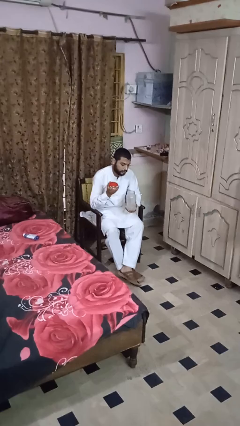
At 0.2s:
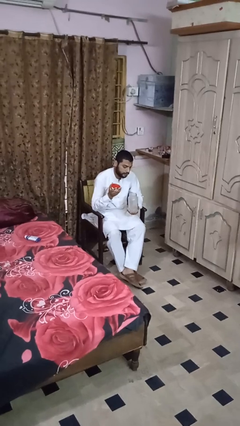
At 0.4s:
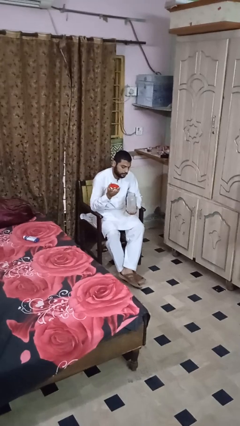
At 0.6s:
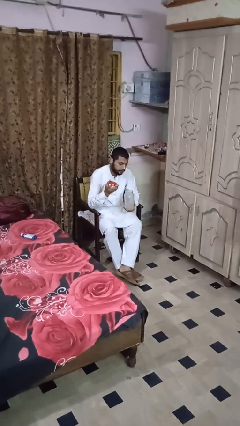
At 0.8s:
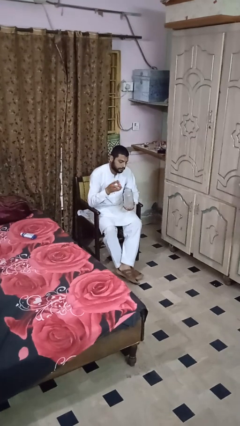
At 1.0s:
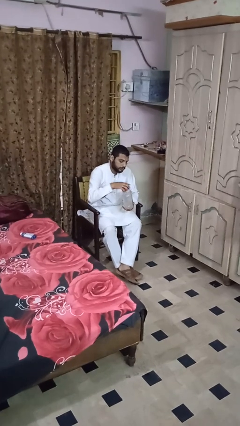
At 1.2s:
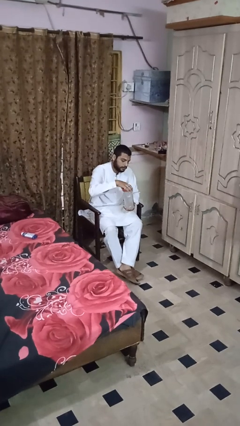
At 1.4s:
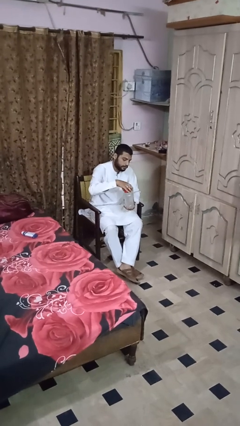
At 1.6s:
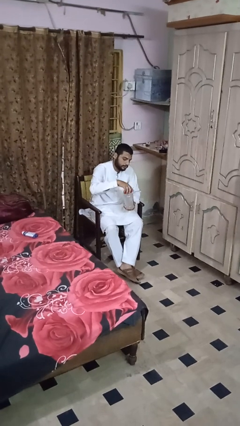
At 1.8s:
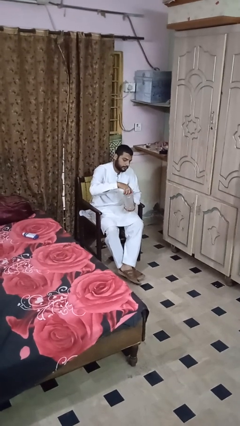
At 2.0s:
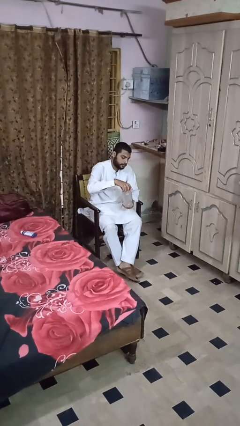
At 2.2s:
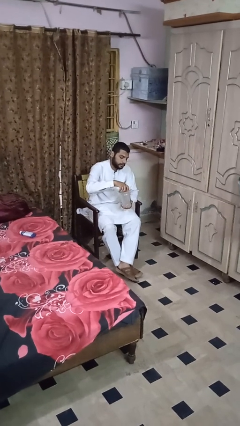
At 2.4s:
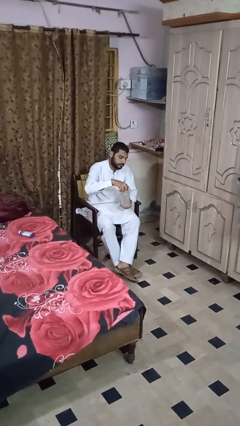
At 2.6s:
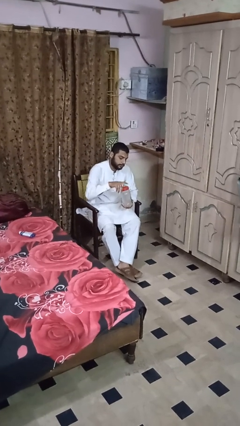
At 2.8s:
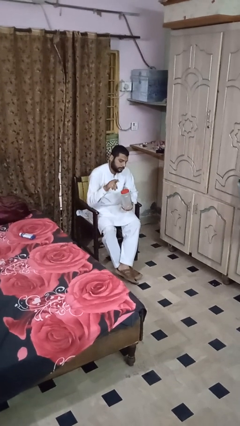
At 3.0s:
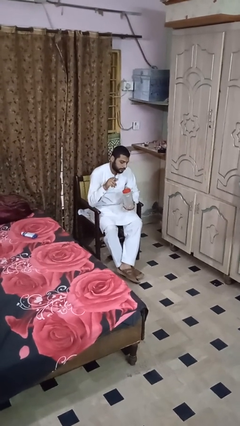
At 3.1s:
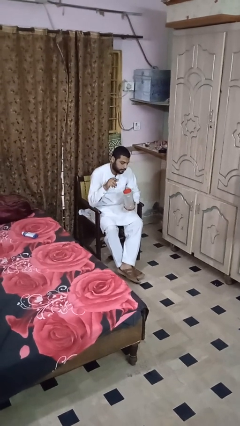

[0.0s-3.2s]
person closes jar

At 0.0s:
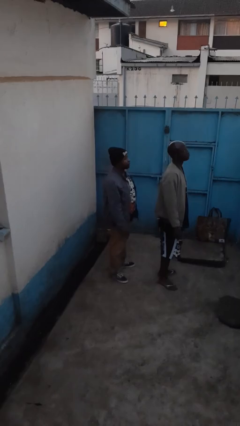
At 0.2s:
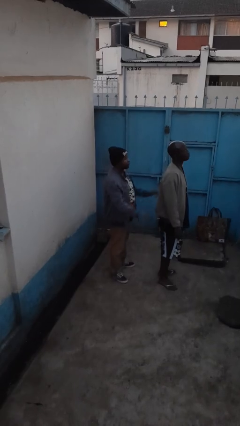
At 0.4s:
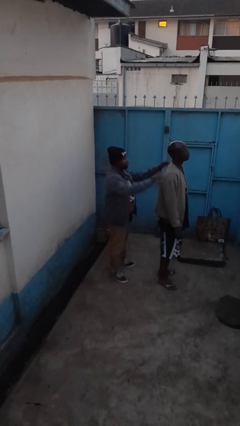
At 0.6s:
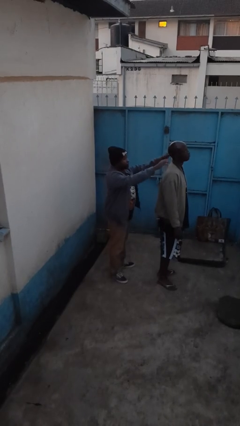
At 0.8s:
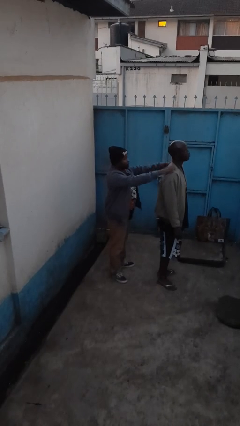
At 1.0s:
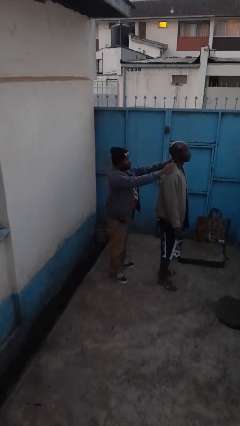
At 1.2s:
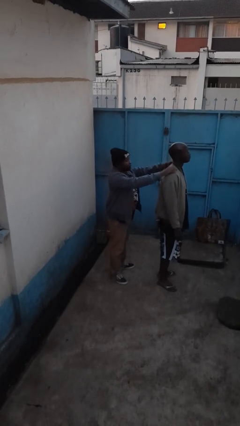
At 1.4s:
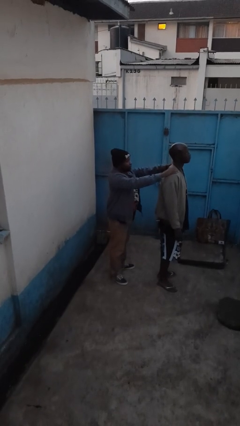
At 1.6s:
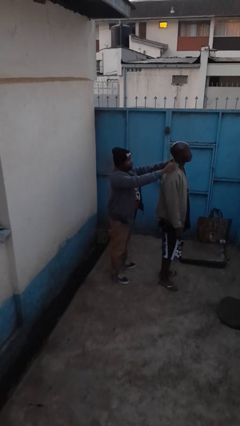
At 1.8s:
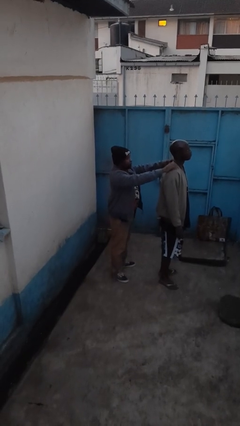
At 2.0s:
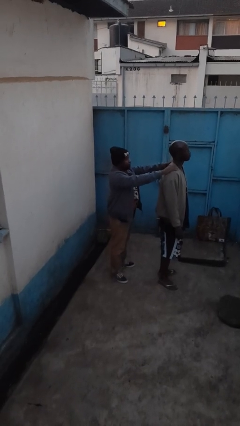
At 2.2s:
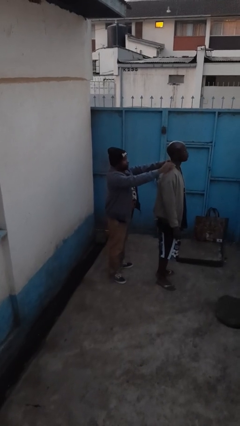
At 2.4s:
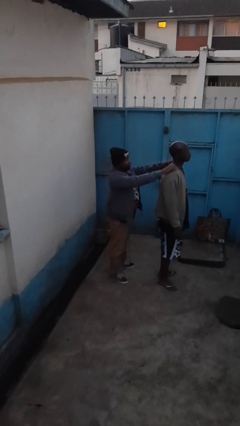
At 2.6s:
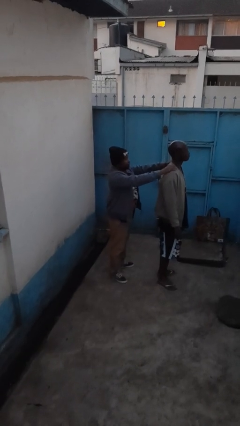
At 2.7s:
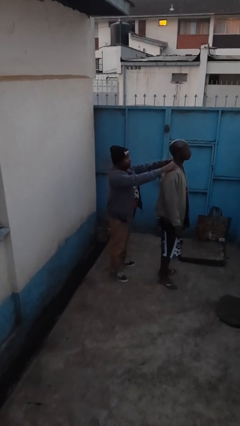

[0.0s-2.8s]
person pounds shoulders of person

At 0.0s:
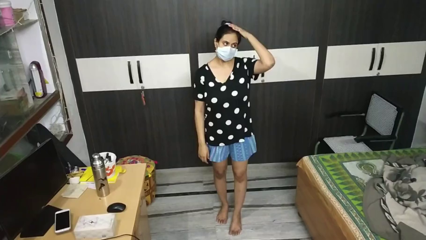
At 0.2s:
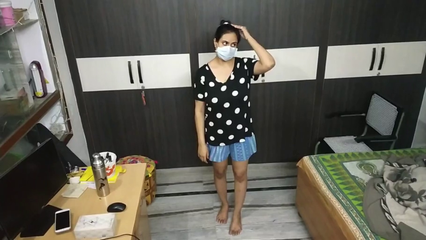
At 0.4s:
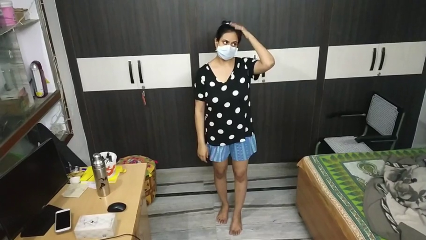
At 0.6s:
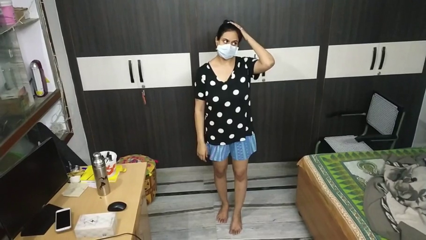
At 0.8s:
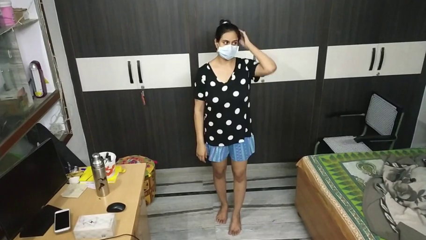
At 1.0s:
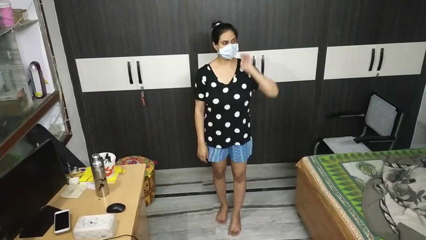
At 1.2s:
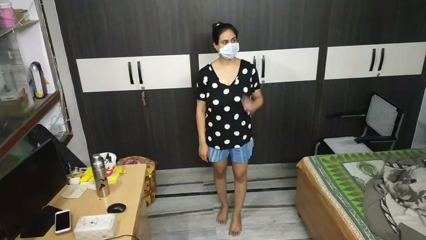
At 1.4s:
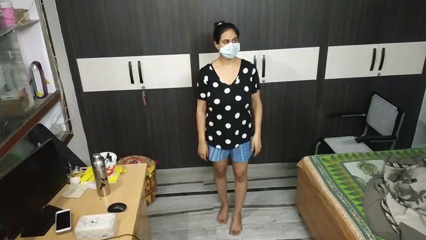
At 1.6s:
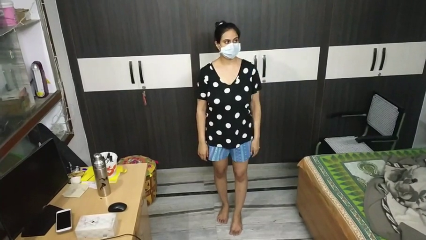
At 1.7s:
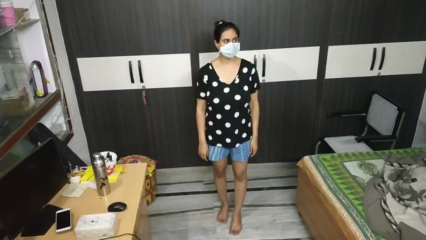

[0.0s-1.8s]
person pats head

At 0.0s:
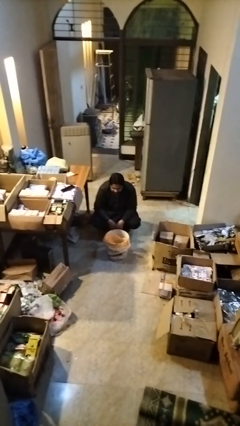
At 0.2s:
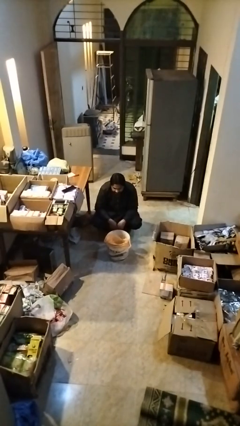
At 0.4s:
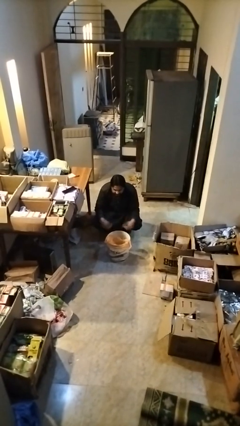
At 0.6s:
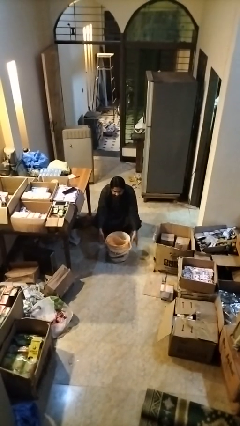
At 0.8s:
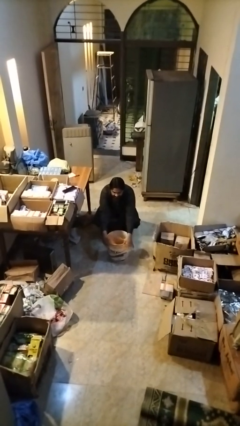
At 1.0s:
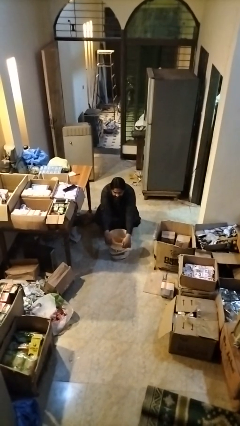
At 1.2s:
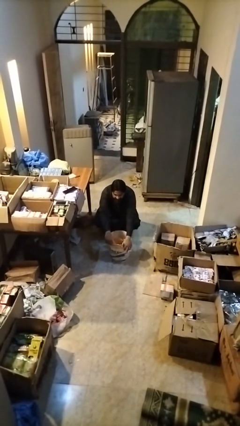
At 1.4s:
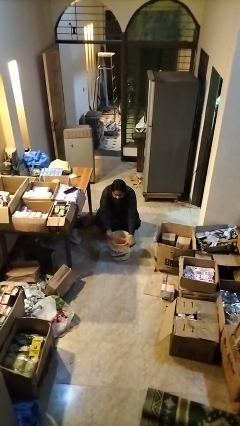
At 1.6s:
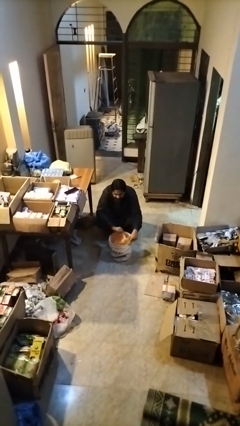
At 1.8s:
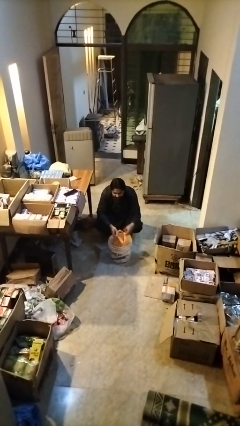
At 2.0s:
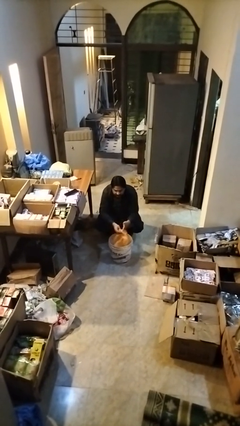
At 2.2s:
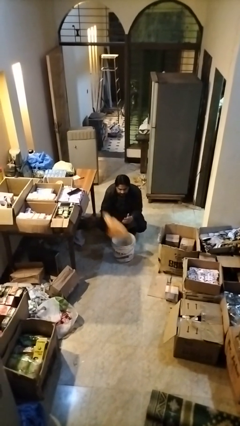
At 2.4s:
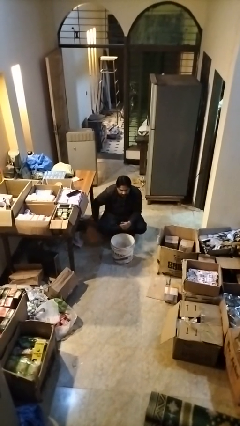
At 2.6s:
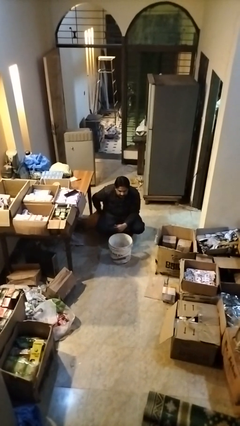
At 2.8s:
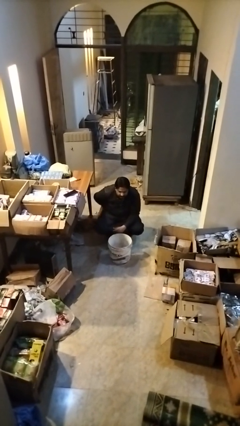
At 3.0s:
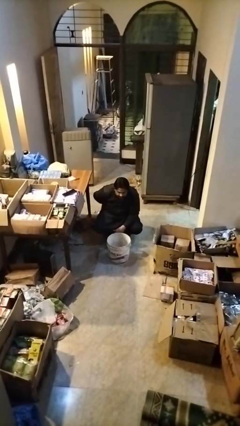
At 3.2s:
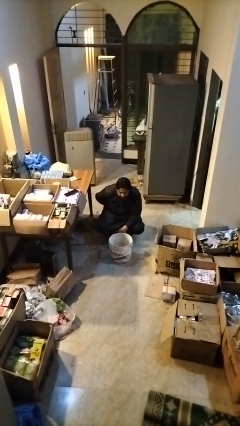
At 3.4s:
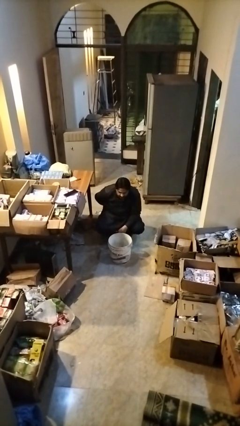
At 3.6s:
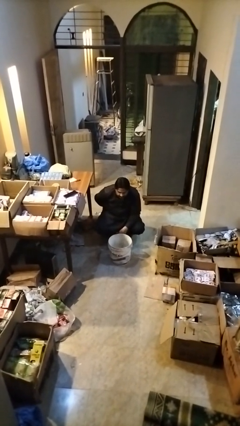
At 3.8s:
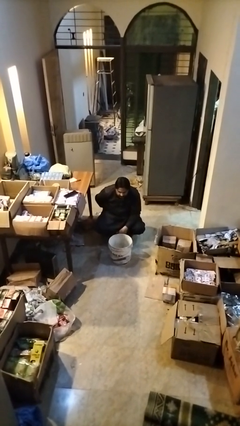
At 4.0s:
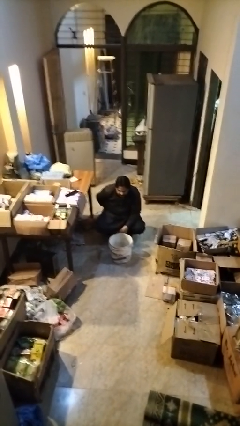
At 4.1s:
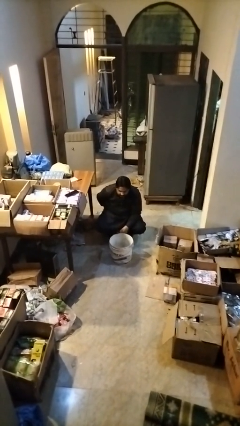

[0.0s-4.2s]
person removes trashbag from trashcan

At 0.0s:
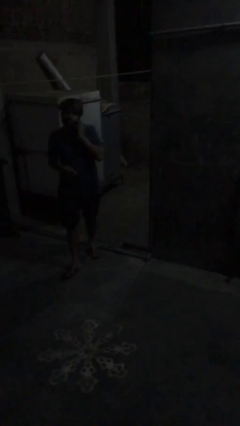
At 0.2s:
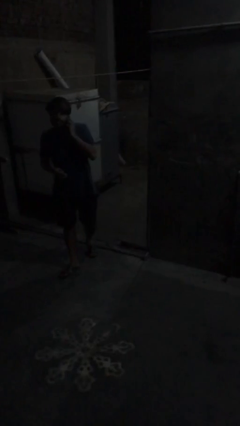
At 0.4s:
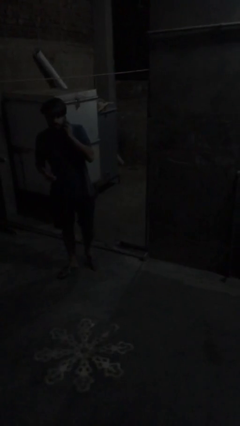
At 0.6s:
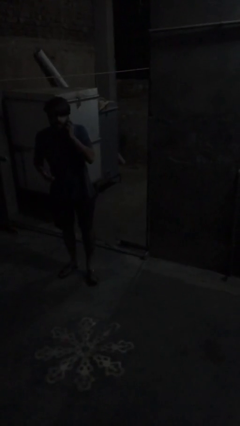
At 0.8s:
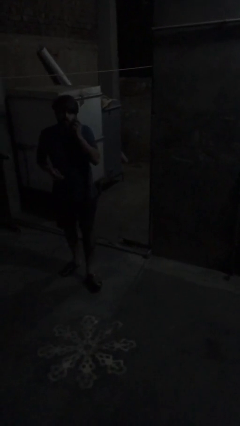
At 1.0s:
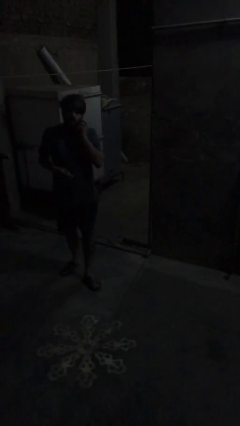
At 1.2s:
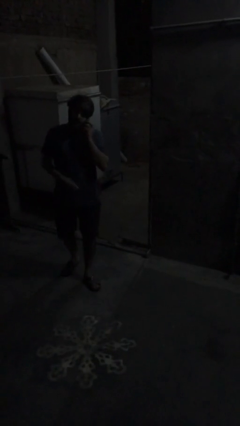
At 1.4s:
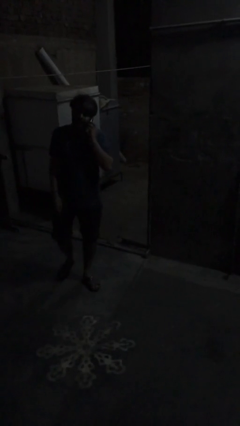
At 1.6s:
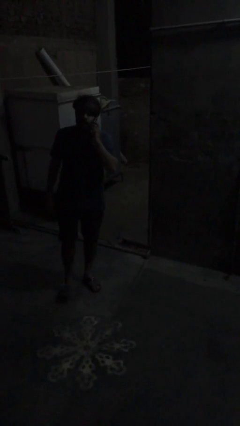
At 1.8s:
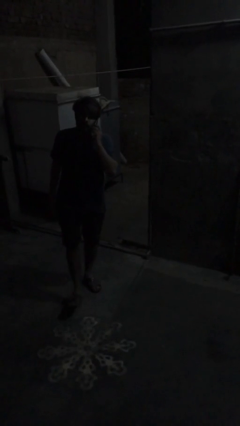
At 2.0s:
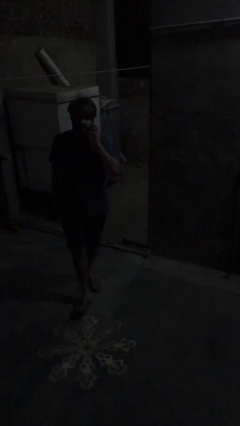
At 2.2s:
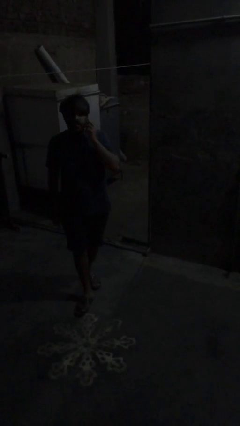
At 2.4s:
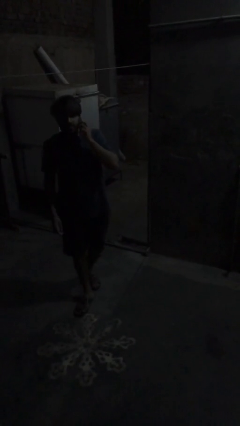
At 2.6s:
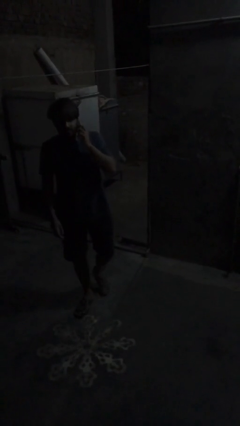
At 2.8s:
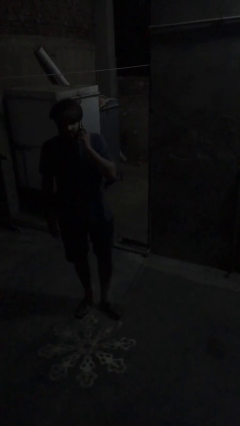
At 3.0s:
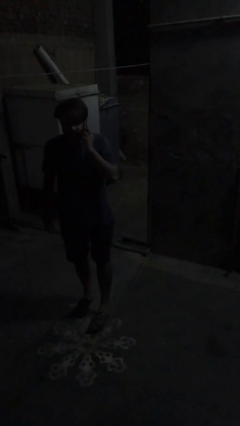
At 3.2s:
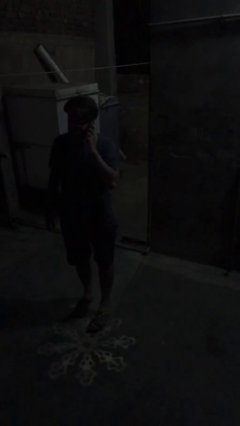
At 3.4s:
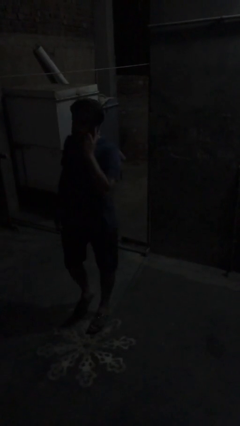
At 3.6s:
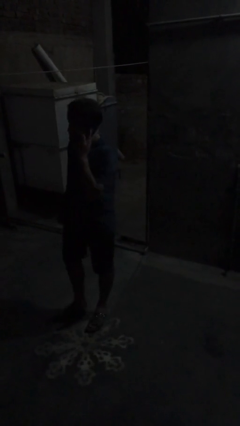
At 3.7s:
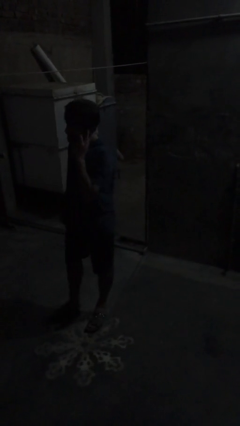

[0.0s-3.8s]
person talks on phone

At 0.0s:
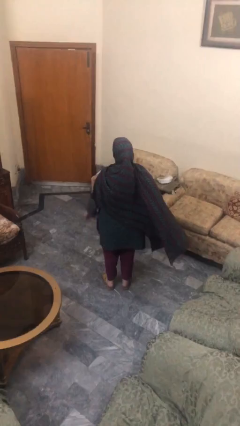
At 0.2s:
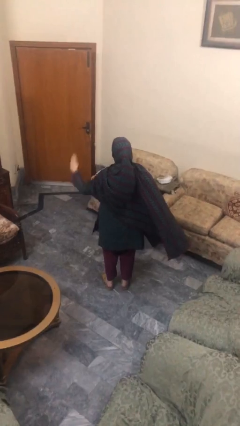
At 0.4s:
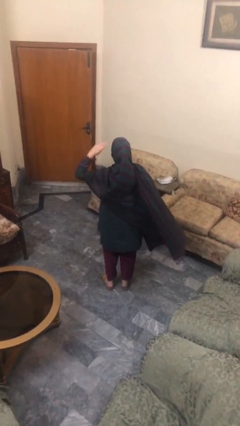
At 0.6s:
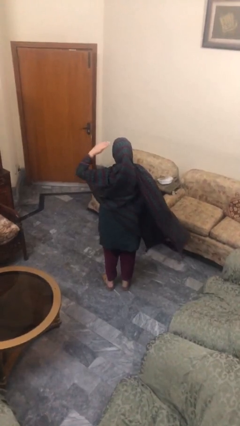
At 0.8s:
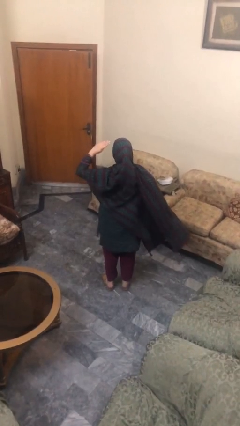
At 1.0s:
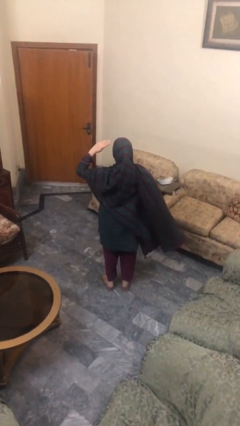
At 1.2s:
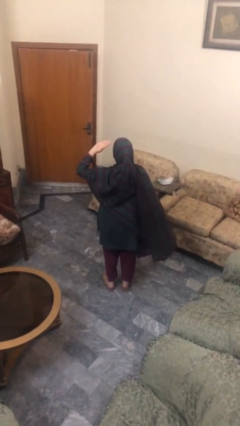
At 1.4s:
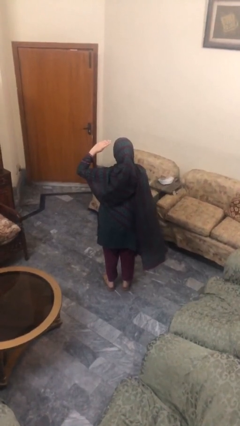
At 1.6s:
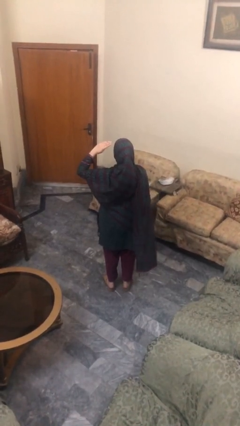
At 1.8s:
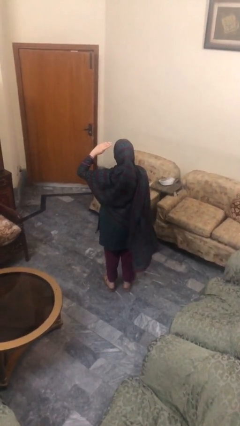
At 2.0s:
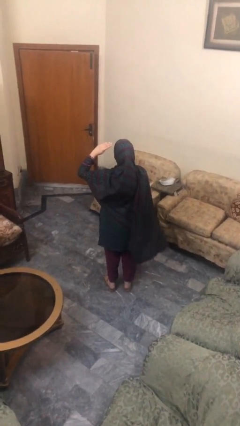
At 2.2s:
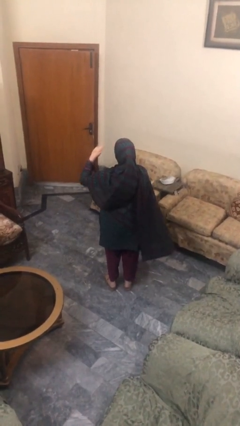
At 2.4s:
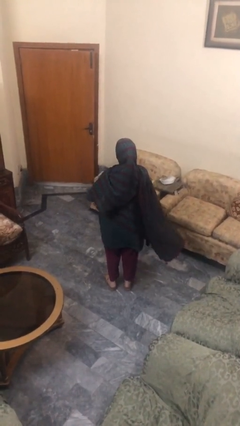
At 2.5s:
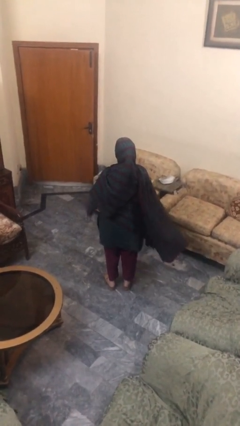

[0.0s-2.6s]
person salutes
